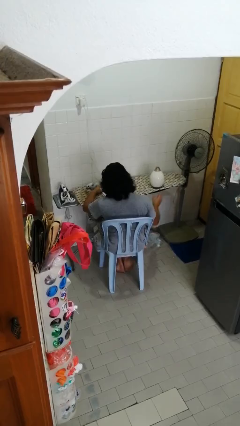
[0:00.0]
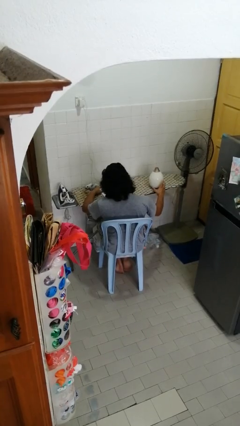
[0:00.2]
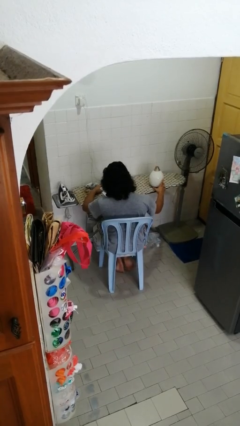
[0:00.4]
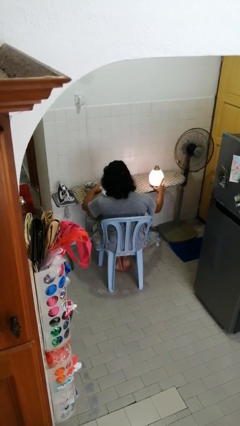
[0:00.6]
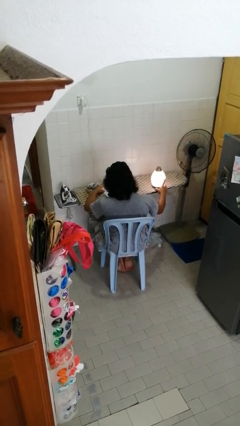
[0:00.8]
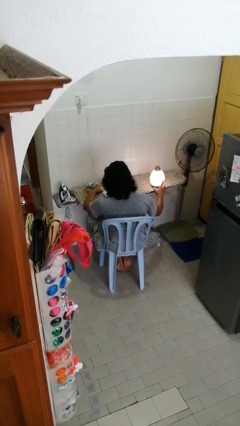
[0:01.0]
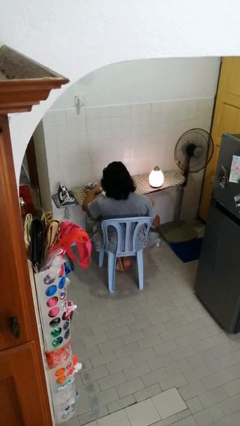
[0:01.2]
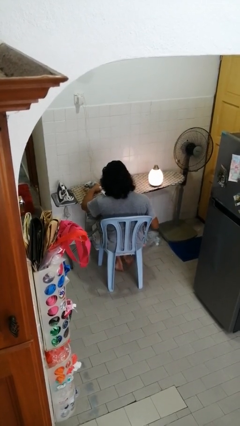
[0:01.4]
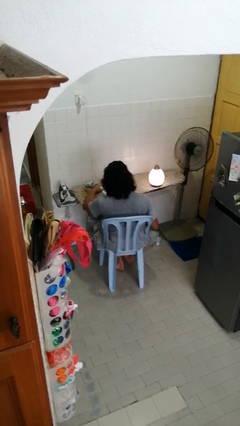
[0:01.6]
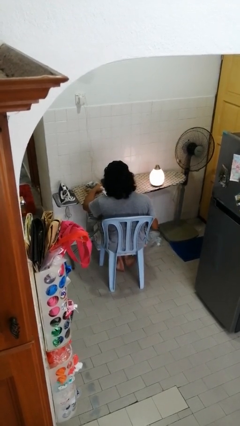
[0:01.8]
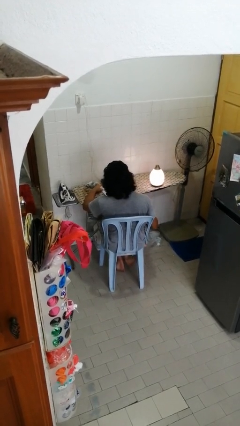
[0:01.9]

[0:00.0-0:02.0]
person turns on lamp

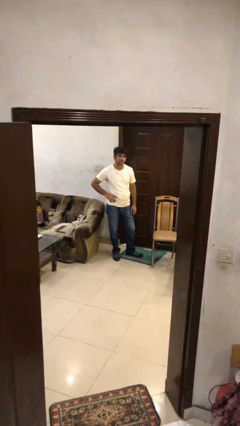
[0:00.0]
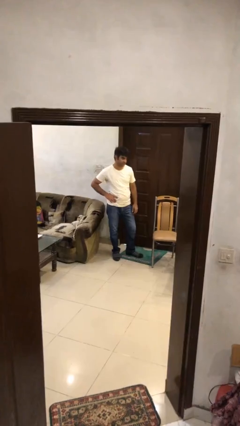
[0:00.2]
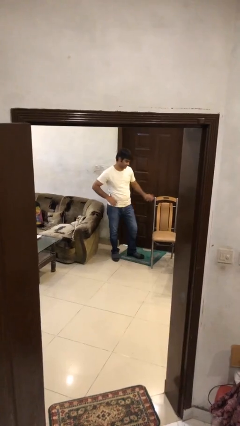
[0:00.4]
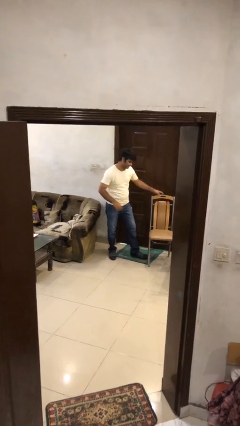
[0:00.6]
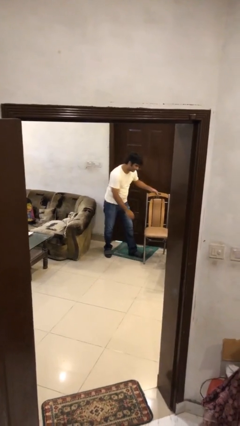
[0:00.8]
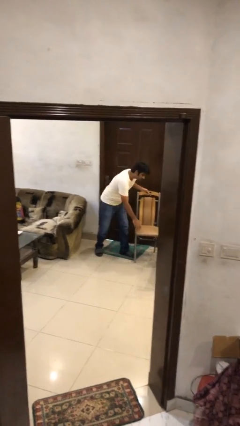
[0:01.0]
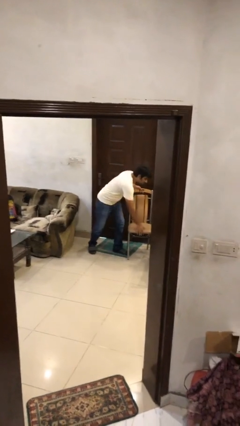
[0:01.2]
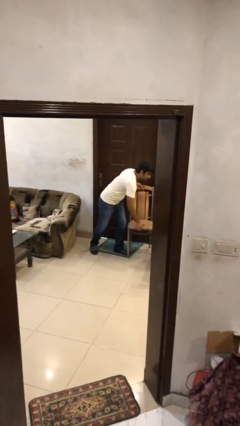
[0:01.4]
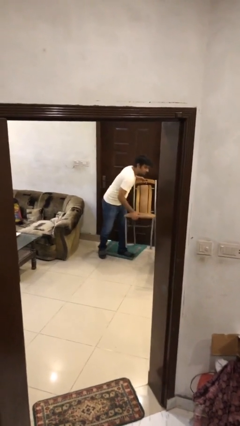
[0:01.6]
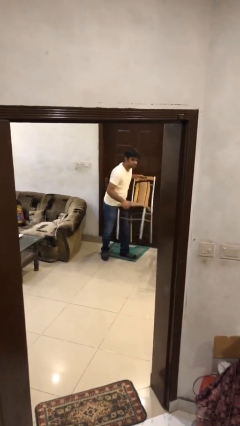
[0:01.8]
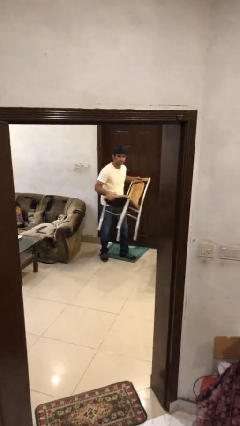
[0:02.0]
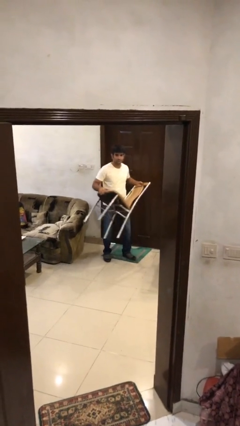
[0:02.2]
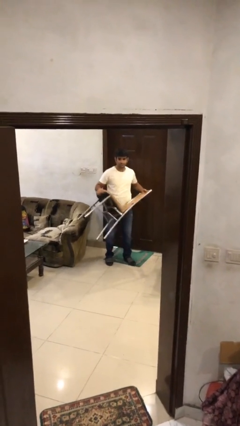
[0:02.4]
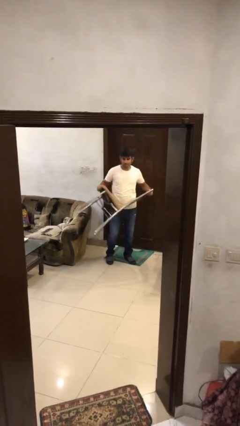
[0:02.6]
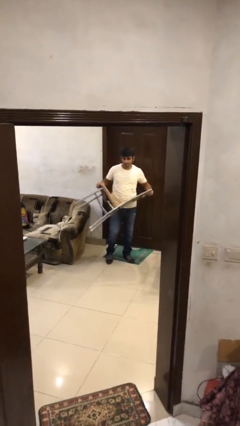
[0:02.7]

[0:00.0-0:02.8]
person picks up object from floor

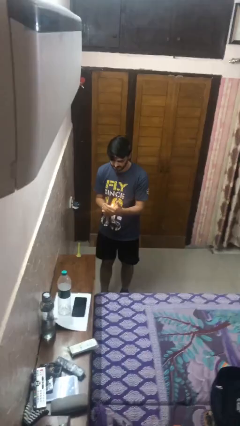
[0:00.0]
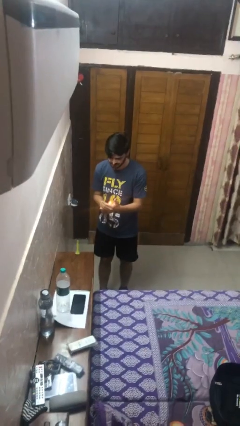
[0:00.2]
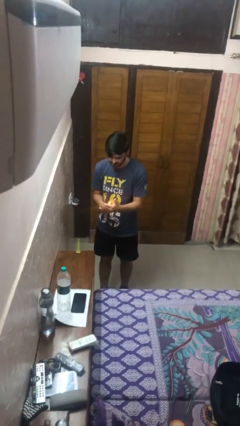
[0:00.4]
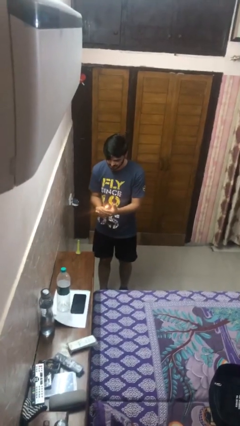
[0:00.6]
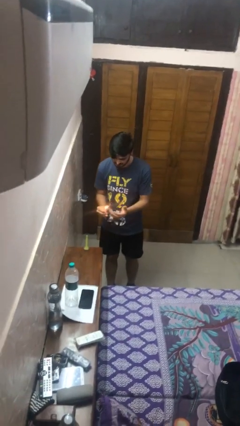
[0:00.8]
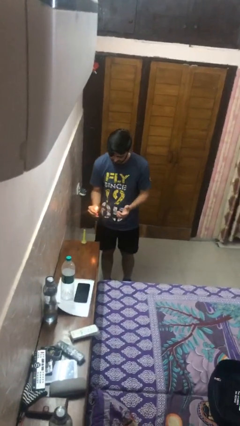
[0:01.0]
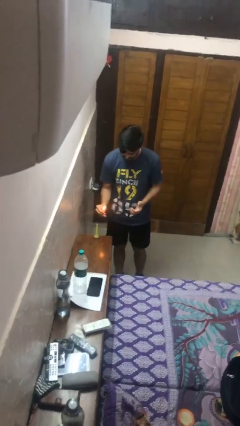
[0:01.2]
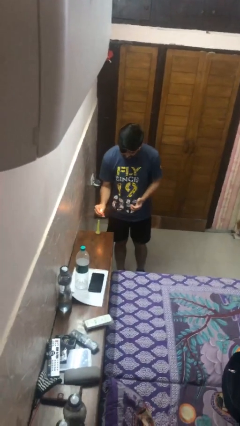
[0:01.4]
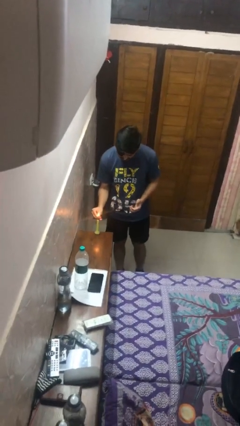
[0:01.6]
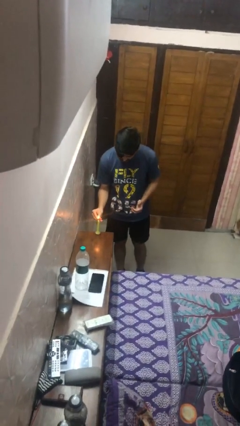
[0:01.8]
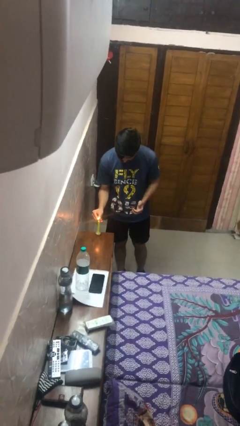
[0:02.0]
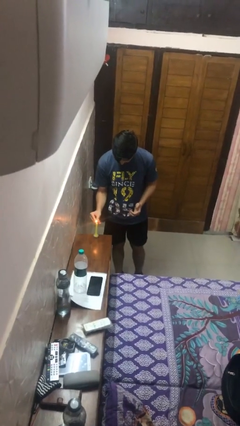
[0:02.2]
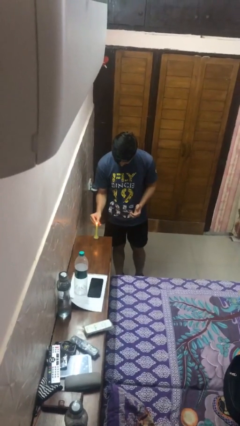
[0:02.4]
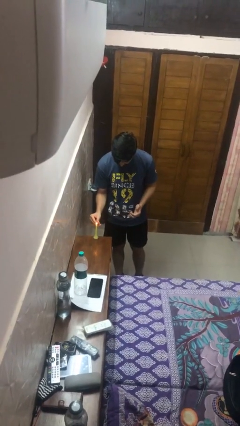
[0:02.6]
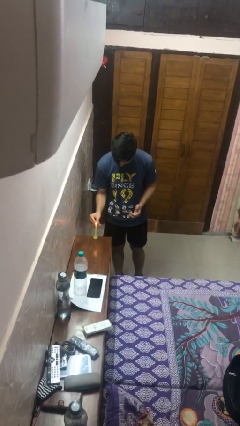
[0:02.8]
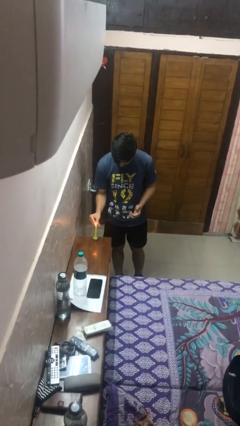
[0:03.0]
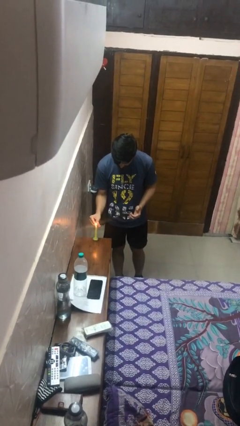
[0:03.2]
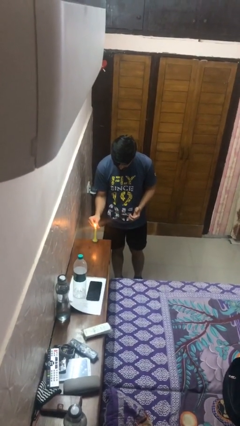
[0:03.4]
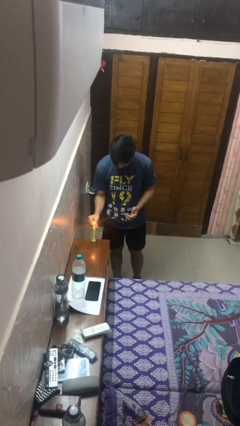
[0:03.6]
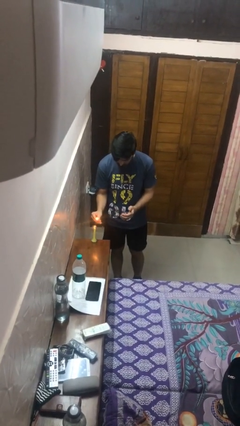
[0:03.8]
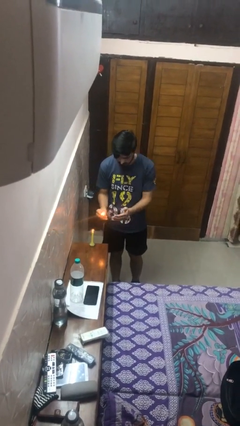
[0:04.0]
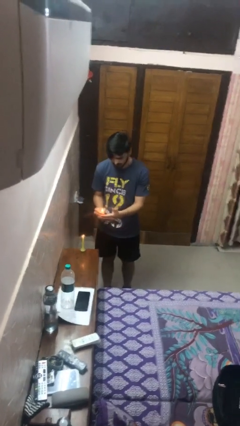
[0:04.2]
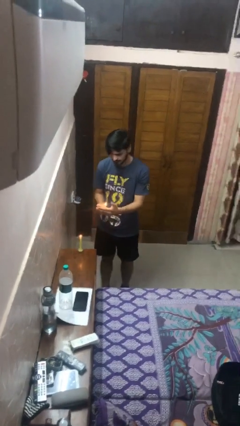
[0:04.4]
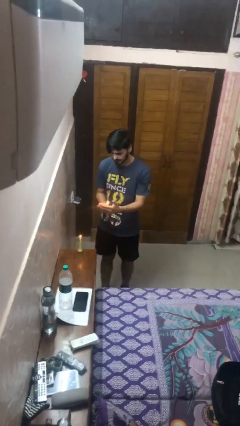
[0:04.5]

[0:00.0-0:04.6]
person lights candle

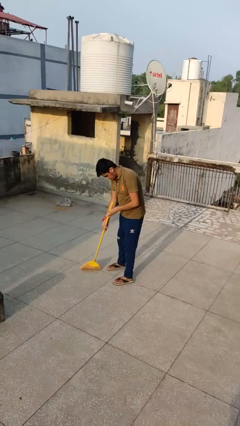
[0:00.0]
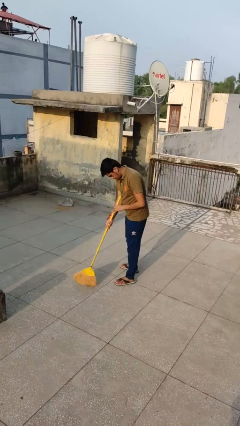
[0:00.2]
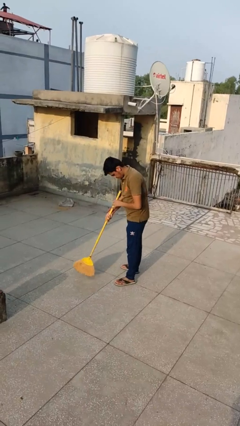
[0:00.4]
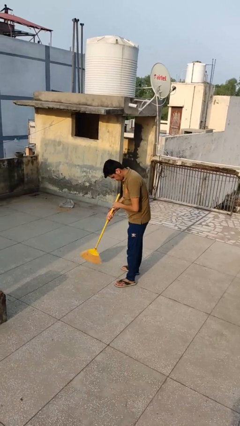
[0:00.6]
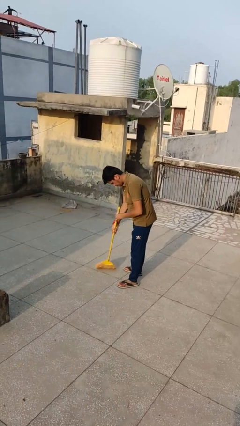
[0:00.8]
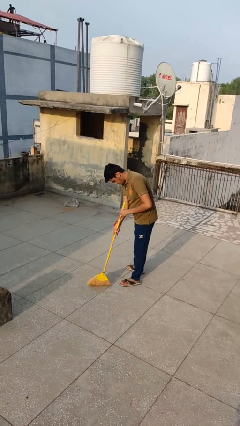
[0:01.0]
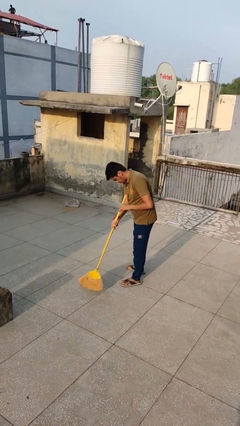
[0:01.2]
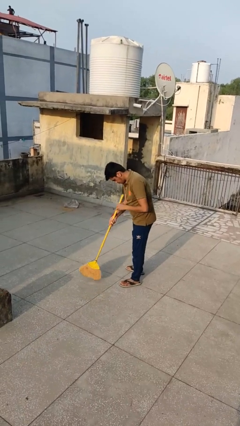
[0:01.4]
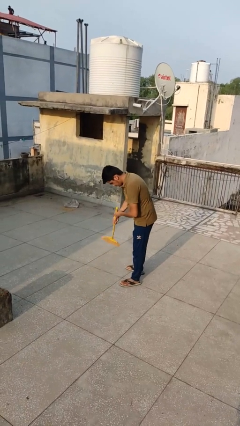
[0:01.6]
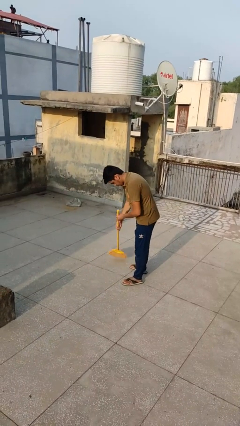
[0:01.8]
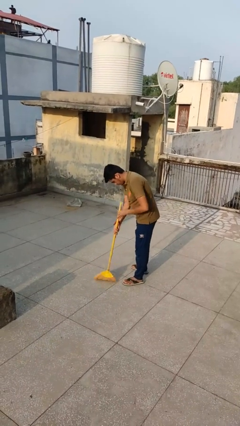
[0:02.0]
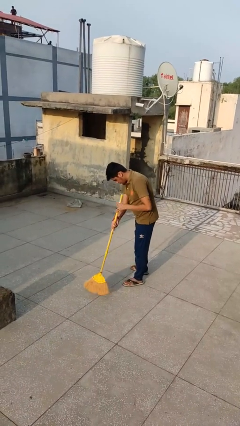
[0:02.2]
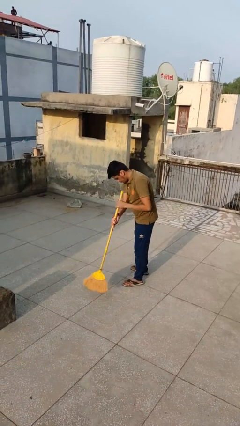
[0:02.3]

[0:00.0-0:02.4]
person sweeps floor

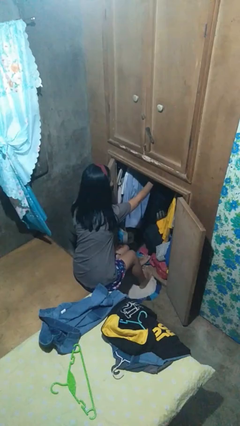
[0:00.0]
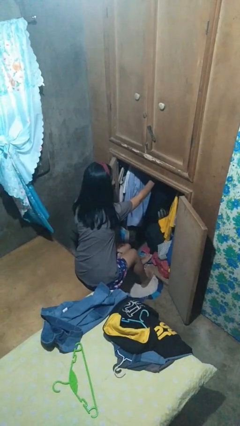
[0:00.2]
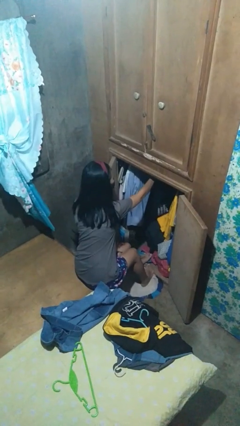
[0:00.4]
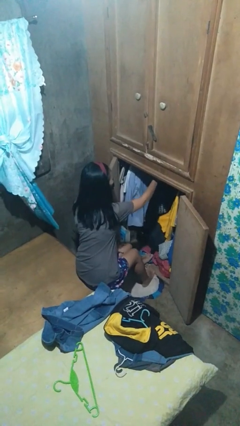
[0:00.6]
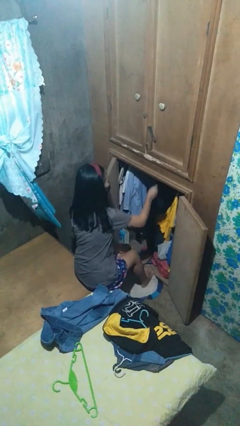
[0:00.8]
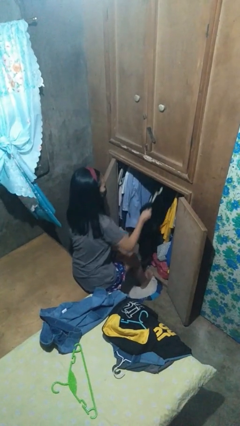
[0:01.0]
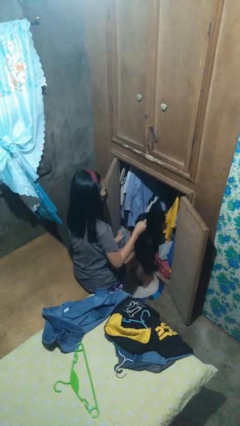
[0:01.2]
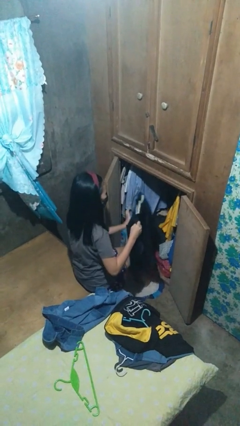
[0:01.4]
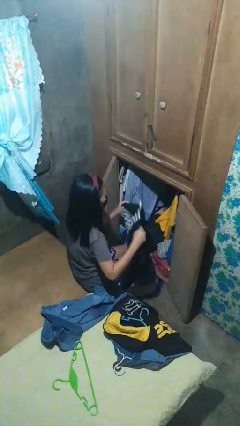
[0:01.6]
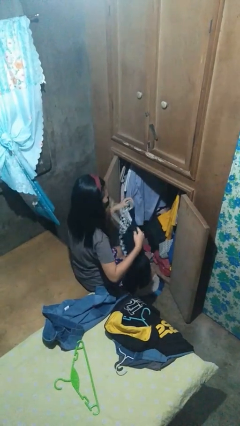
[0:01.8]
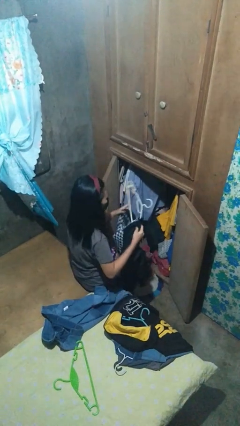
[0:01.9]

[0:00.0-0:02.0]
person takes clothes from closet

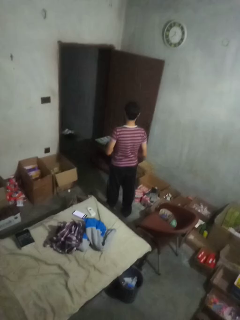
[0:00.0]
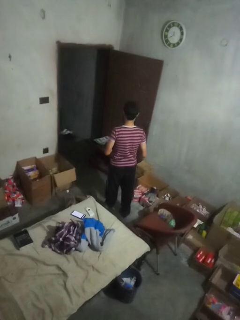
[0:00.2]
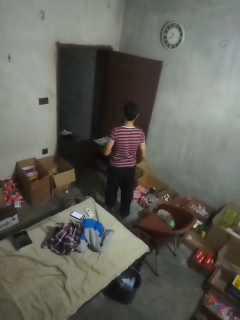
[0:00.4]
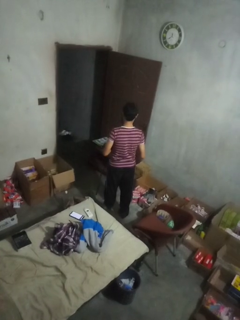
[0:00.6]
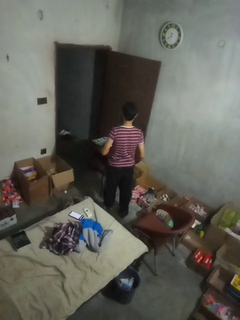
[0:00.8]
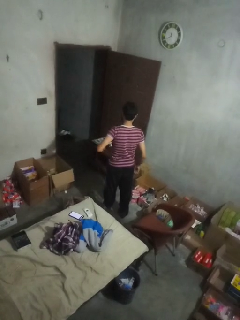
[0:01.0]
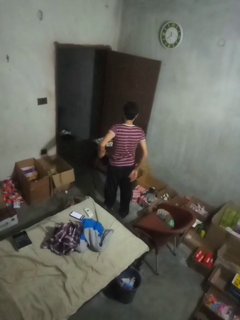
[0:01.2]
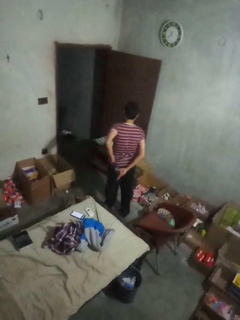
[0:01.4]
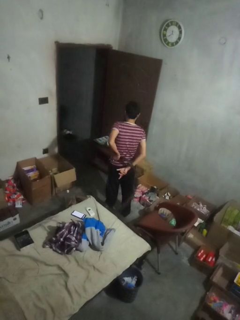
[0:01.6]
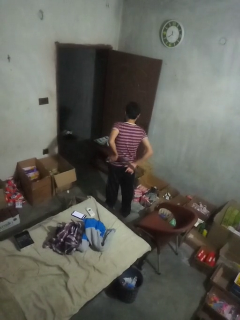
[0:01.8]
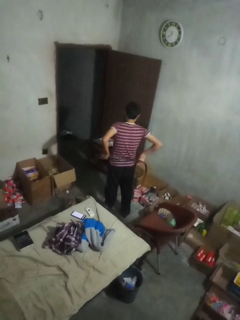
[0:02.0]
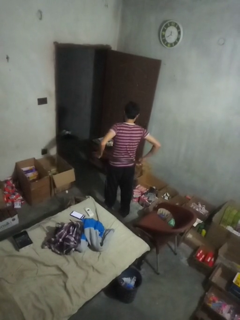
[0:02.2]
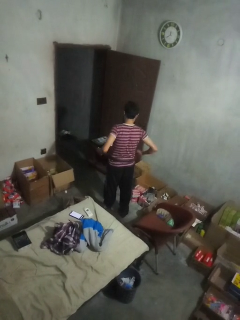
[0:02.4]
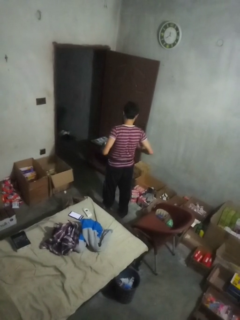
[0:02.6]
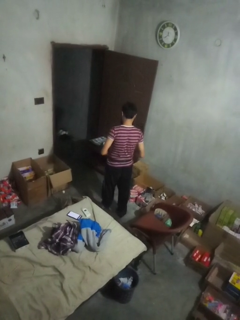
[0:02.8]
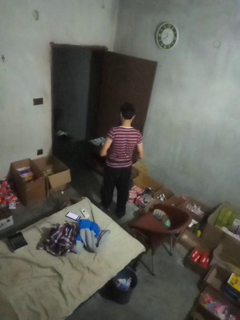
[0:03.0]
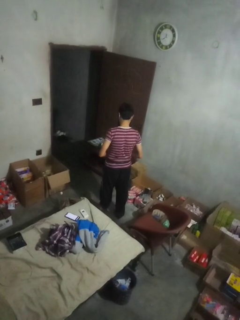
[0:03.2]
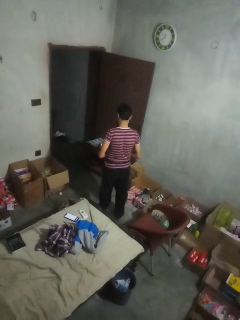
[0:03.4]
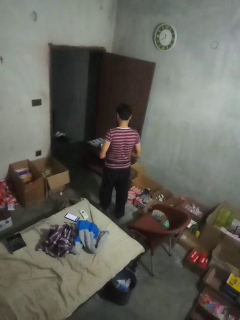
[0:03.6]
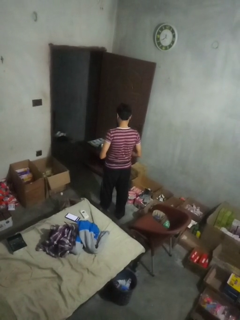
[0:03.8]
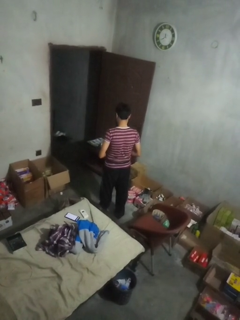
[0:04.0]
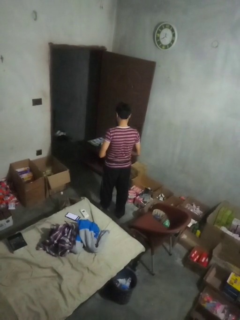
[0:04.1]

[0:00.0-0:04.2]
person puts on belt

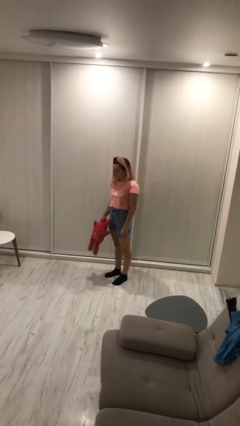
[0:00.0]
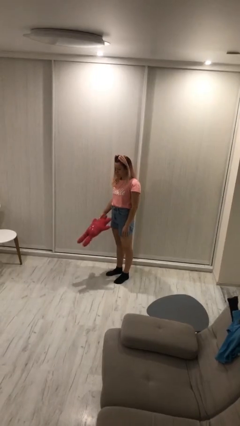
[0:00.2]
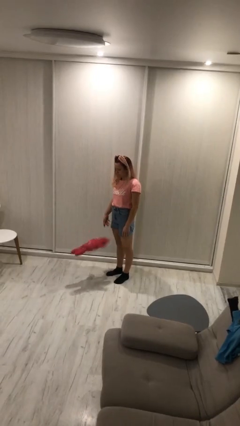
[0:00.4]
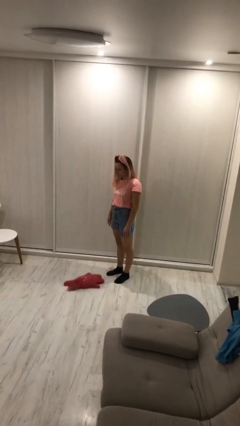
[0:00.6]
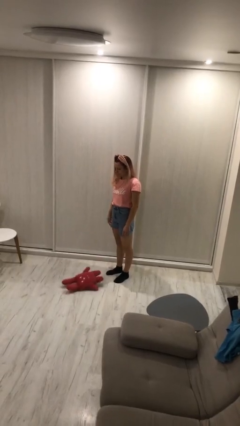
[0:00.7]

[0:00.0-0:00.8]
person throws object to ground
